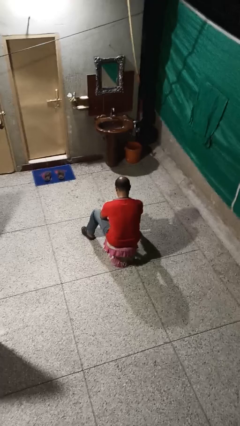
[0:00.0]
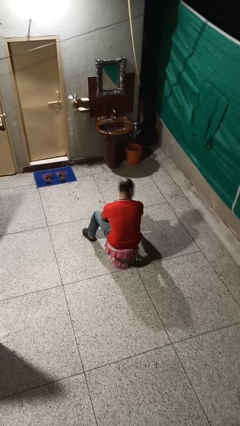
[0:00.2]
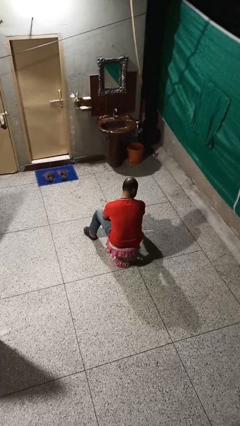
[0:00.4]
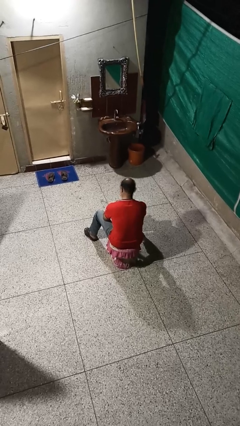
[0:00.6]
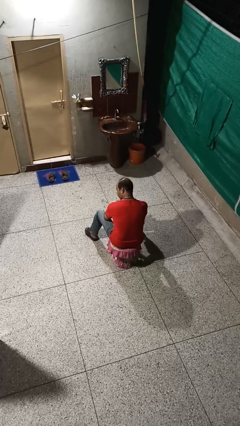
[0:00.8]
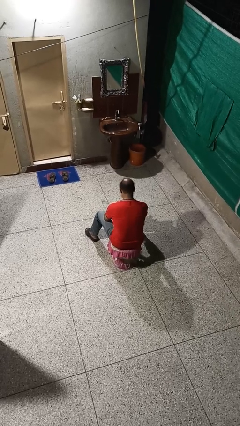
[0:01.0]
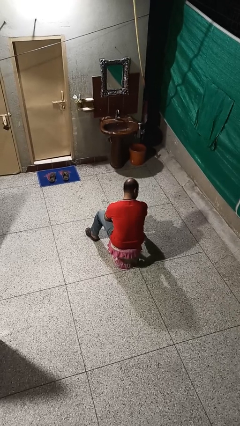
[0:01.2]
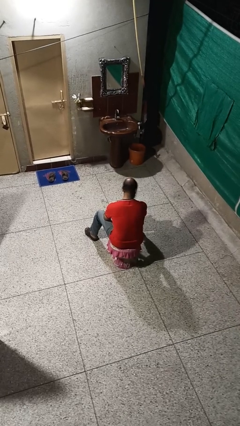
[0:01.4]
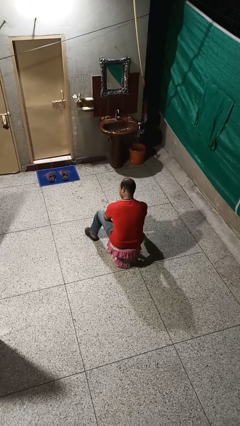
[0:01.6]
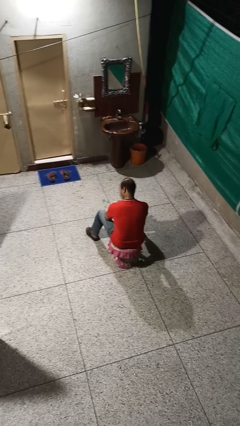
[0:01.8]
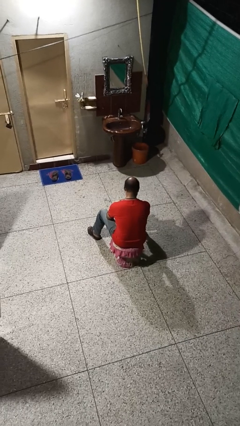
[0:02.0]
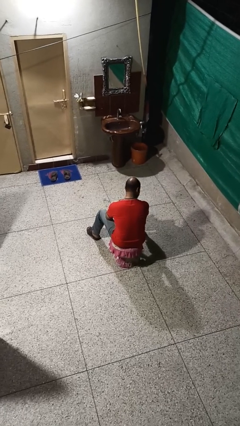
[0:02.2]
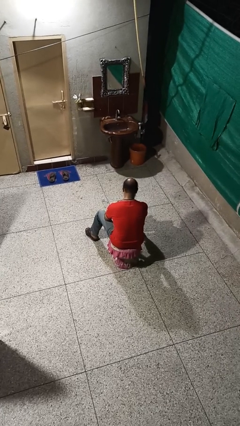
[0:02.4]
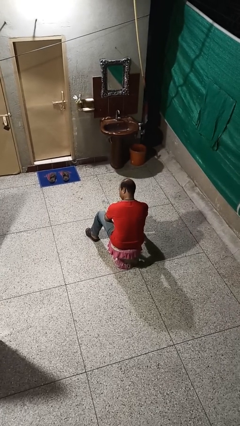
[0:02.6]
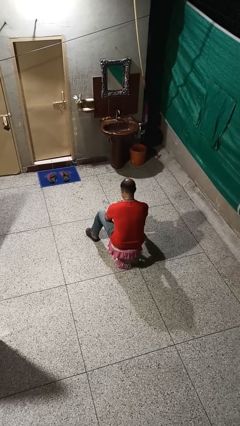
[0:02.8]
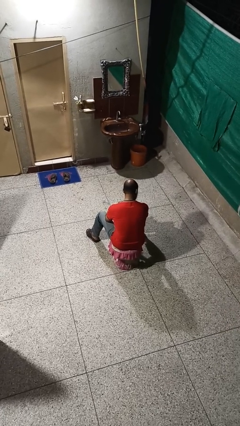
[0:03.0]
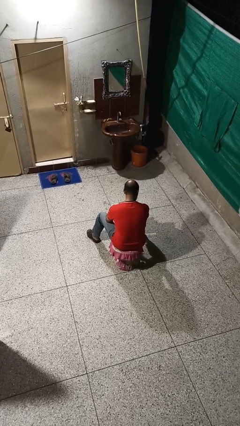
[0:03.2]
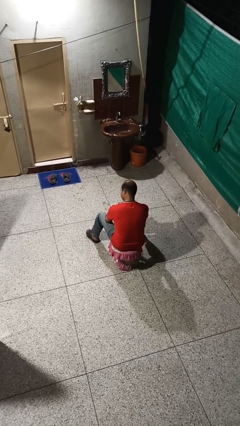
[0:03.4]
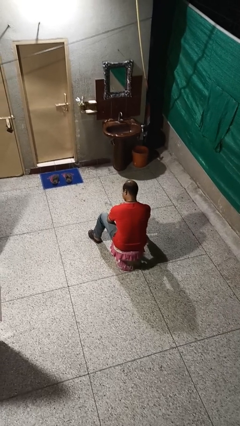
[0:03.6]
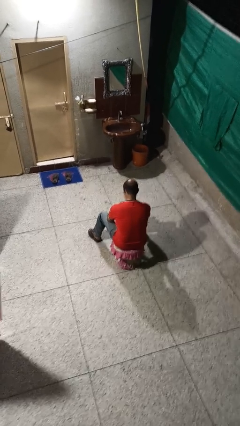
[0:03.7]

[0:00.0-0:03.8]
person shakes head

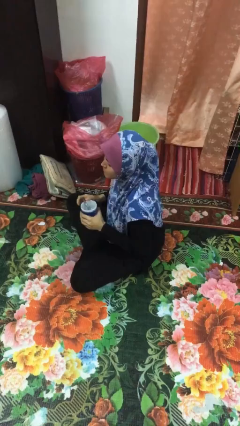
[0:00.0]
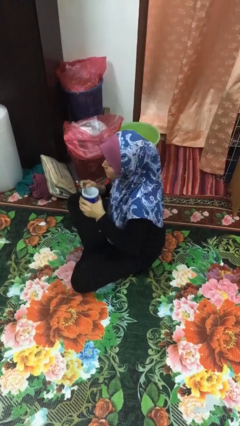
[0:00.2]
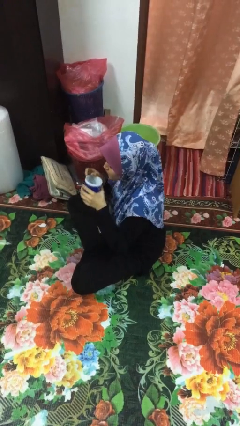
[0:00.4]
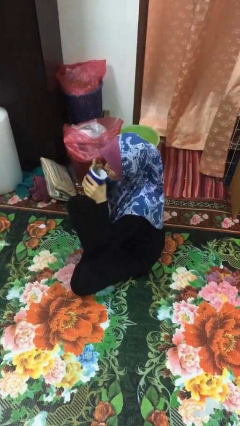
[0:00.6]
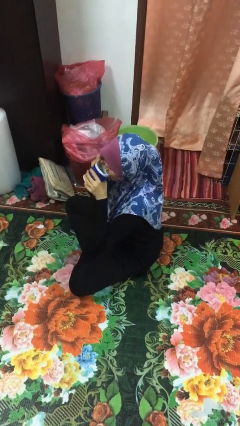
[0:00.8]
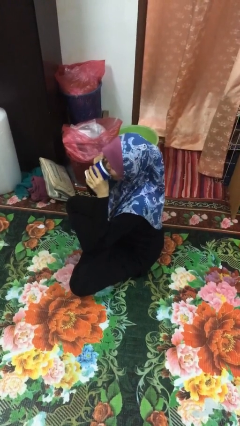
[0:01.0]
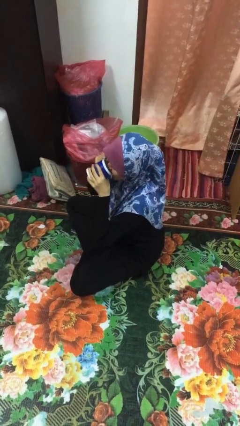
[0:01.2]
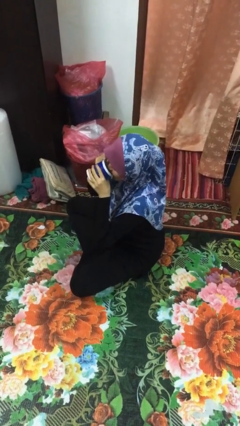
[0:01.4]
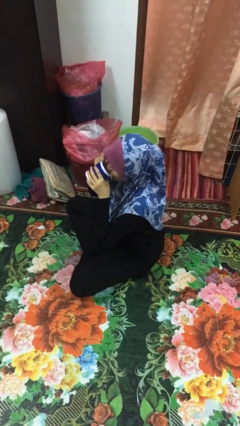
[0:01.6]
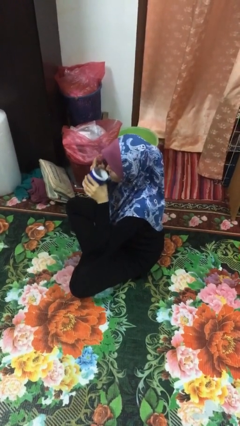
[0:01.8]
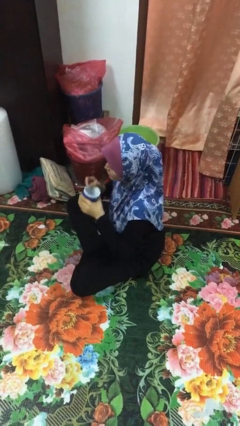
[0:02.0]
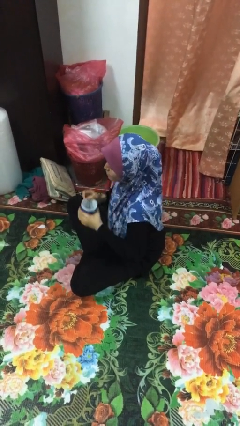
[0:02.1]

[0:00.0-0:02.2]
person drinks from mug

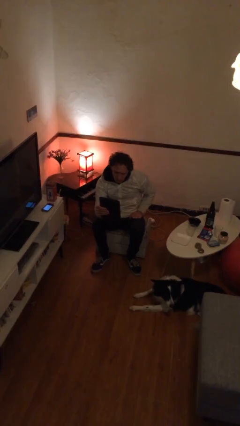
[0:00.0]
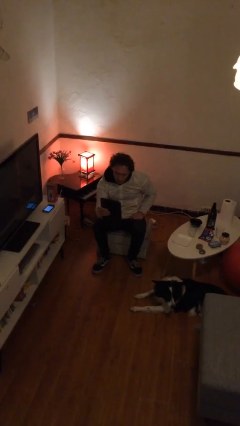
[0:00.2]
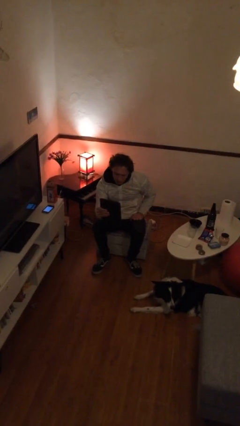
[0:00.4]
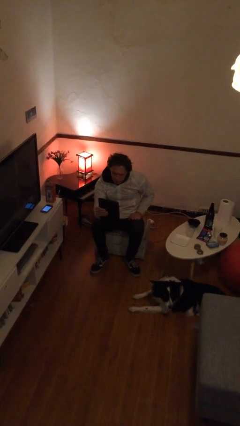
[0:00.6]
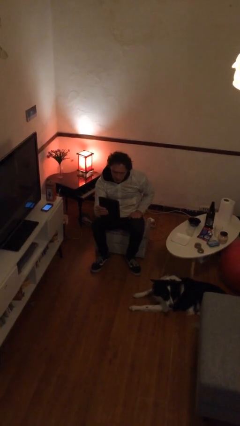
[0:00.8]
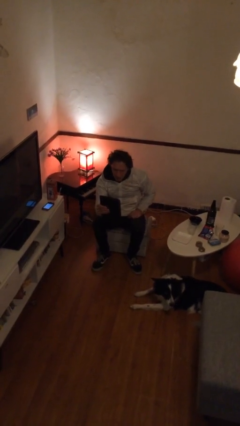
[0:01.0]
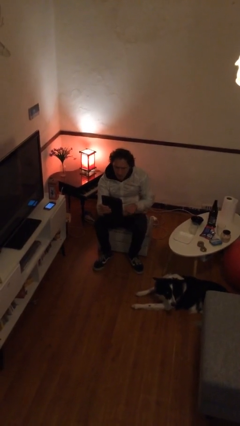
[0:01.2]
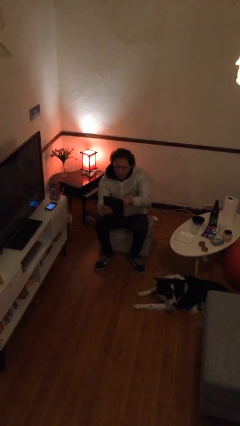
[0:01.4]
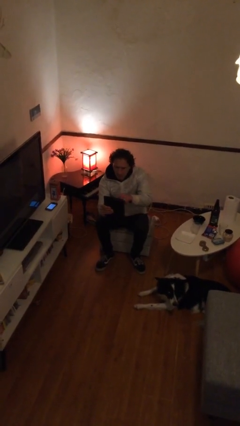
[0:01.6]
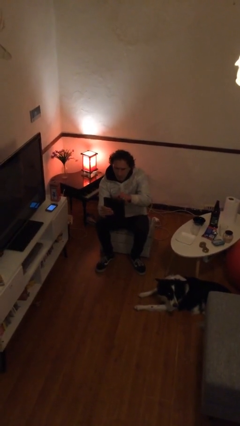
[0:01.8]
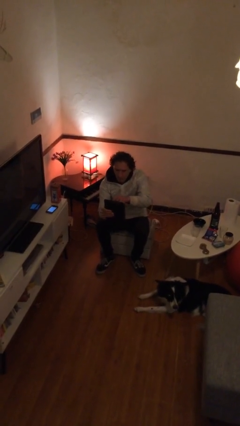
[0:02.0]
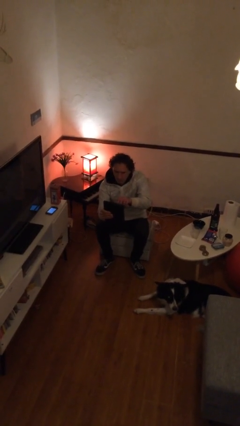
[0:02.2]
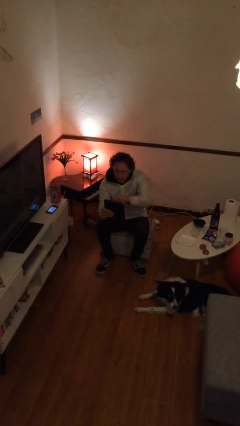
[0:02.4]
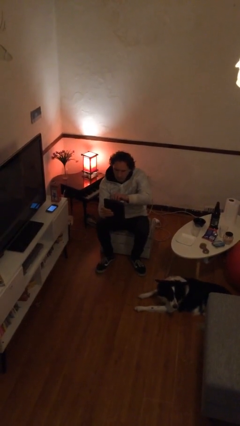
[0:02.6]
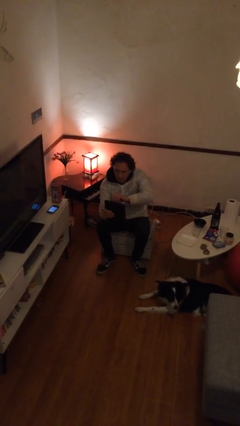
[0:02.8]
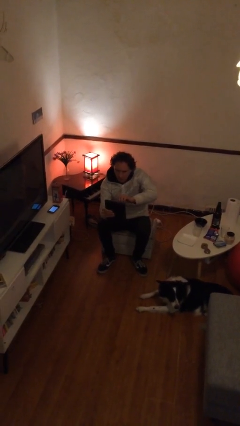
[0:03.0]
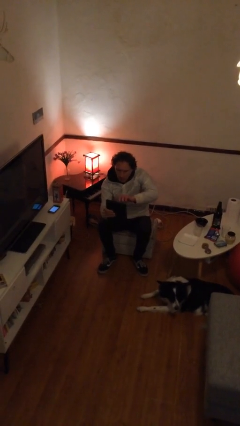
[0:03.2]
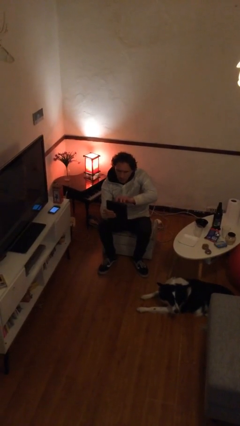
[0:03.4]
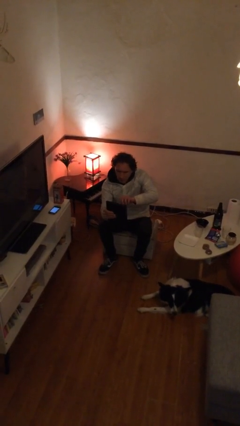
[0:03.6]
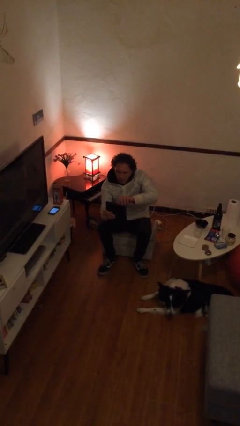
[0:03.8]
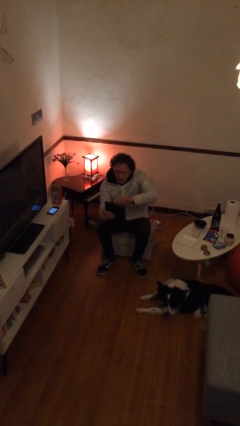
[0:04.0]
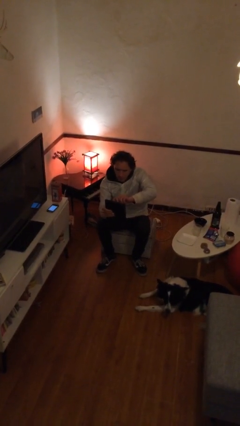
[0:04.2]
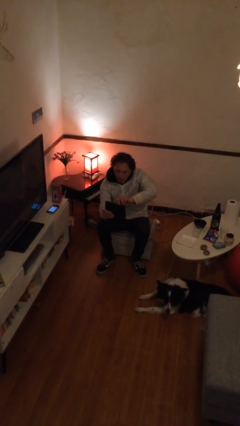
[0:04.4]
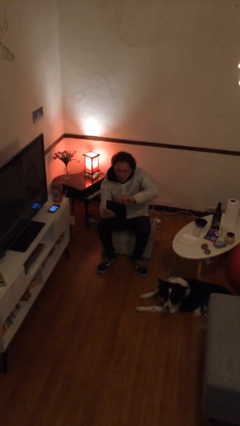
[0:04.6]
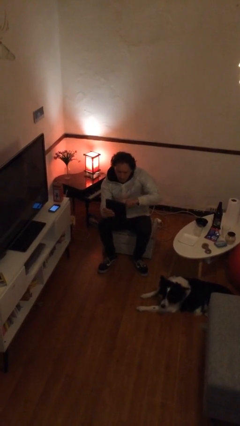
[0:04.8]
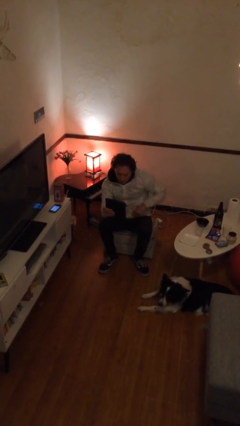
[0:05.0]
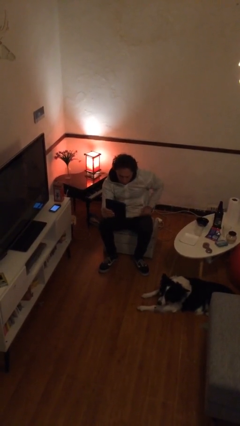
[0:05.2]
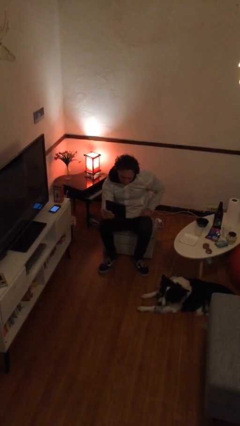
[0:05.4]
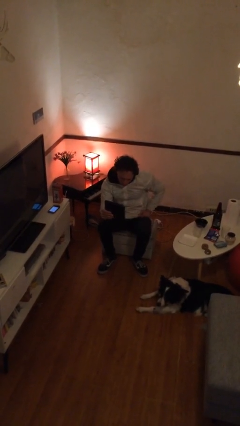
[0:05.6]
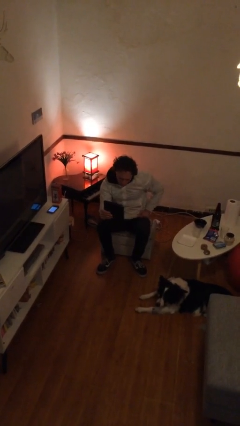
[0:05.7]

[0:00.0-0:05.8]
person interacts with tablet

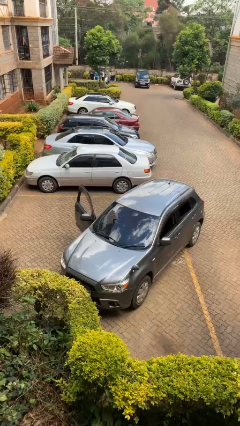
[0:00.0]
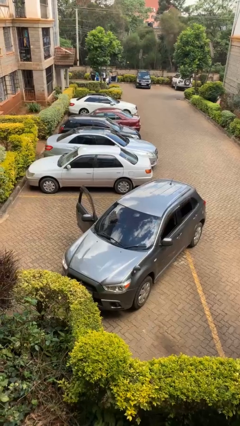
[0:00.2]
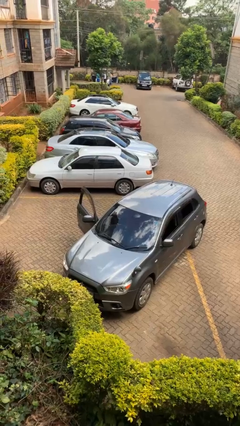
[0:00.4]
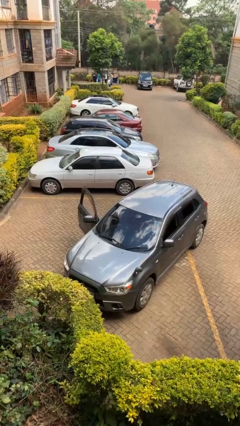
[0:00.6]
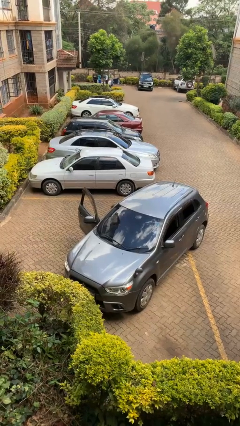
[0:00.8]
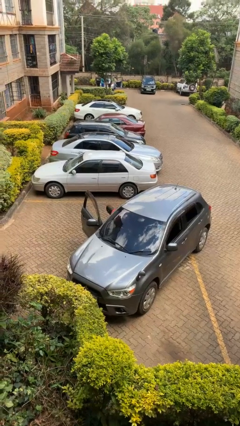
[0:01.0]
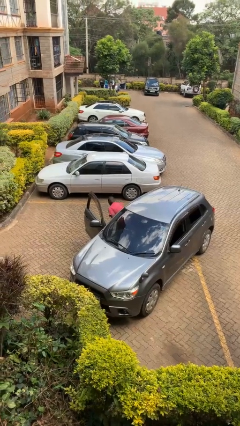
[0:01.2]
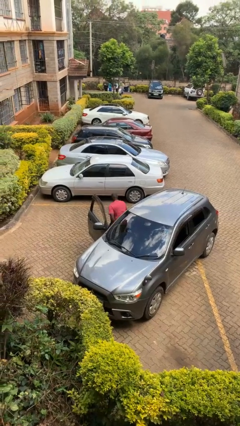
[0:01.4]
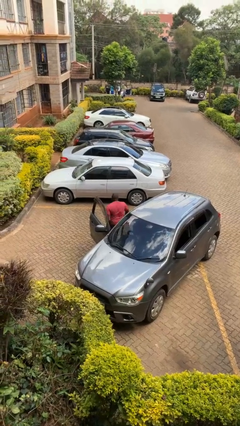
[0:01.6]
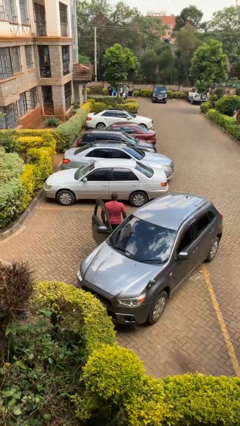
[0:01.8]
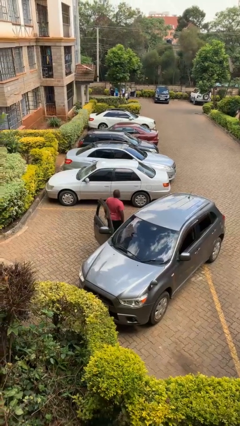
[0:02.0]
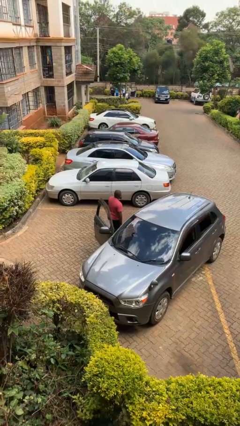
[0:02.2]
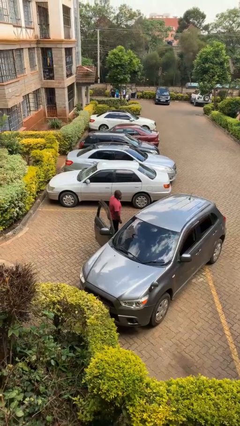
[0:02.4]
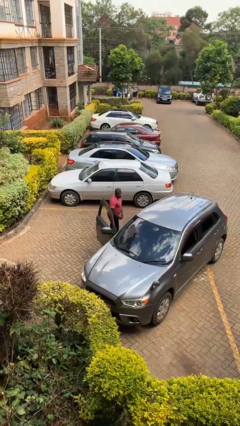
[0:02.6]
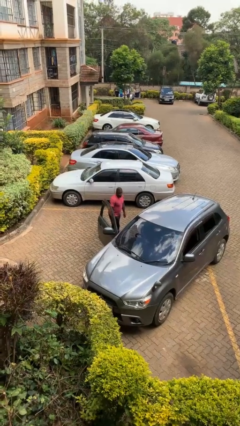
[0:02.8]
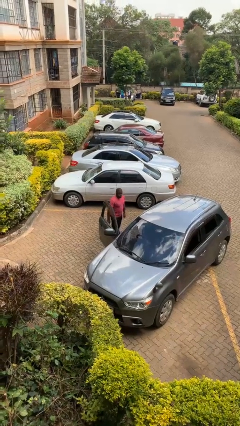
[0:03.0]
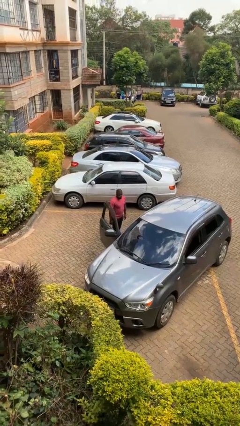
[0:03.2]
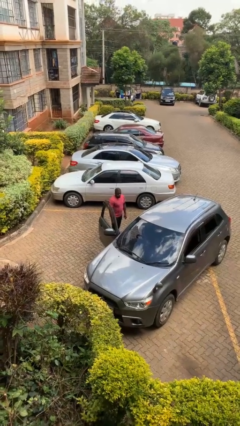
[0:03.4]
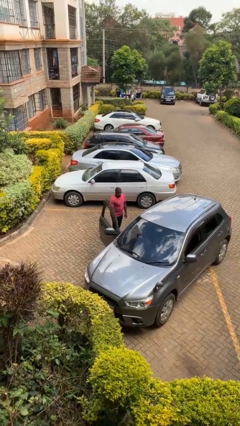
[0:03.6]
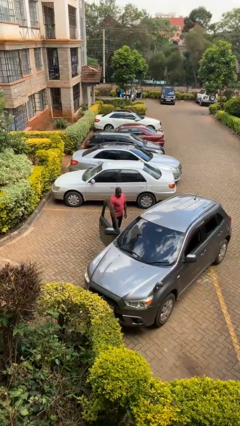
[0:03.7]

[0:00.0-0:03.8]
person exits car

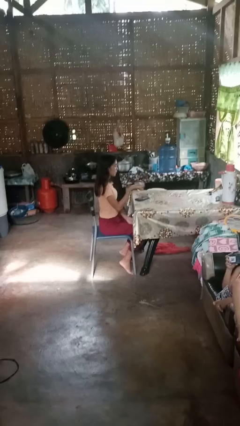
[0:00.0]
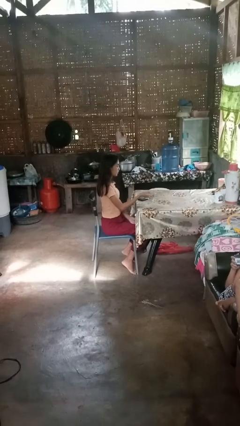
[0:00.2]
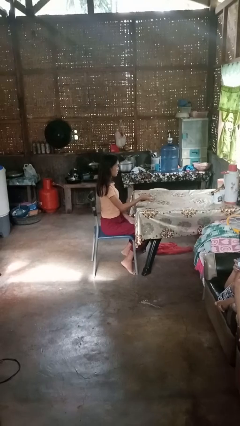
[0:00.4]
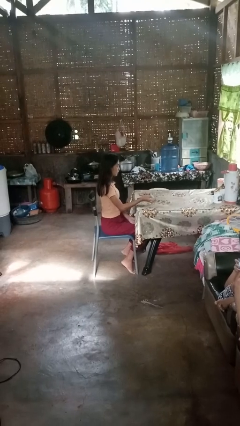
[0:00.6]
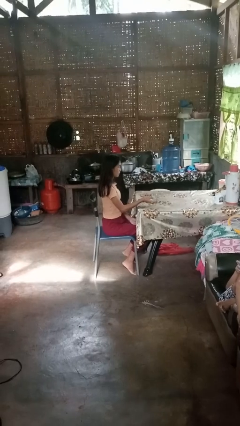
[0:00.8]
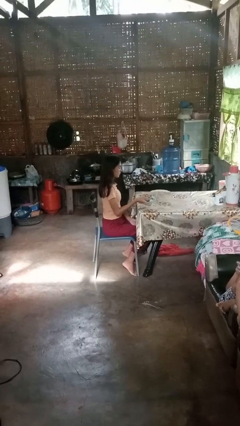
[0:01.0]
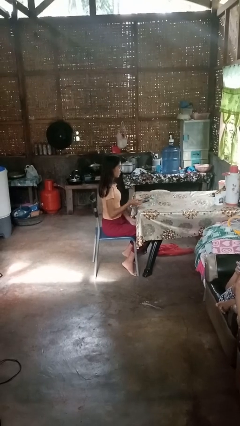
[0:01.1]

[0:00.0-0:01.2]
person puts down object on table

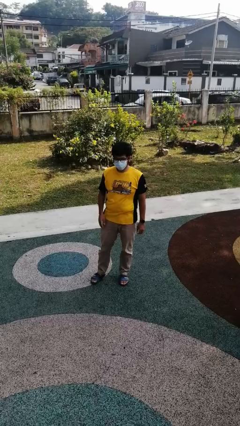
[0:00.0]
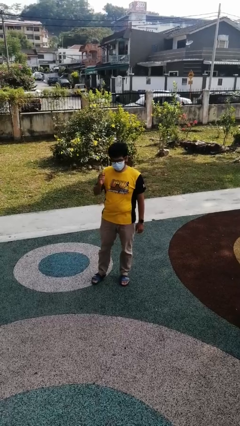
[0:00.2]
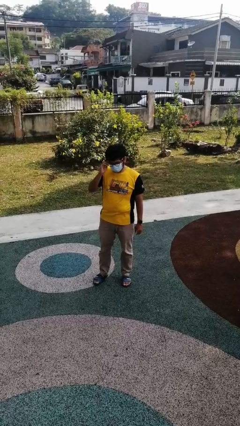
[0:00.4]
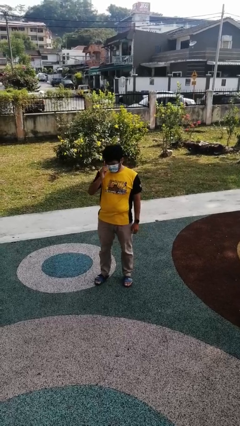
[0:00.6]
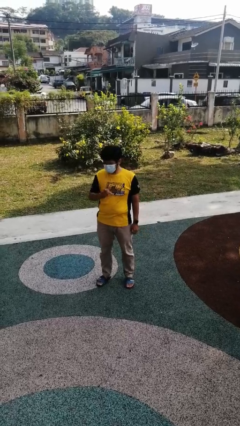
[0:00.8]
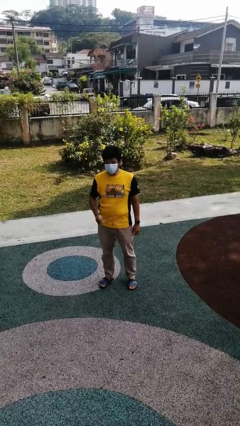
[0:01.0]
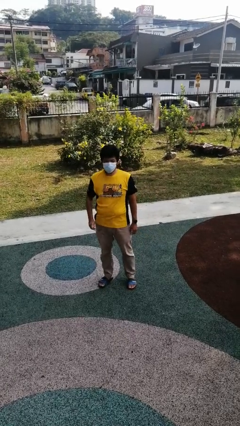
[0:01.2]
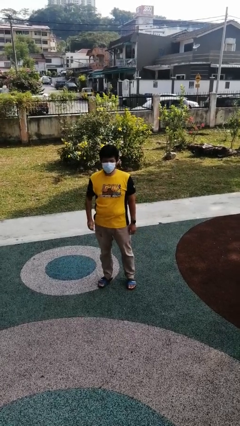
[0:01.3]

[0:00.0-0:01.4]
person takes off glasses
